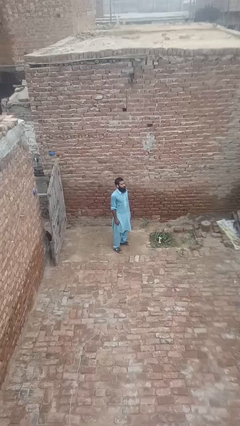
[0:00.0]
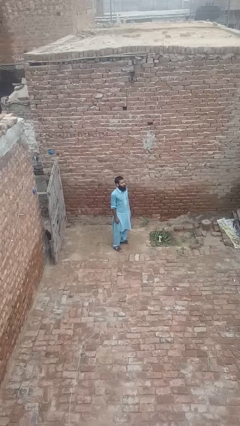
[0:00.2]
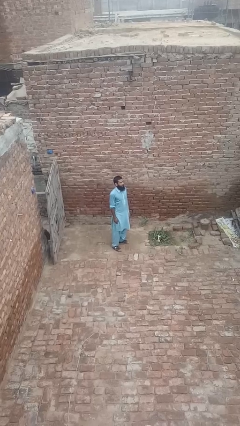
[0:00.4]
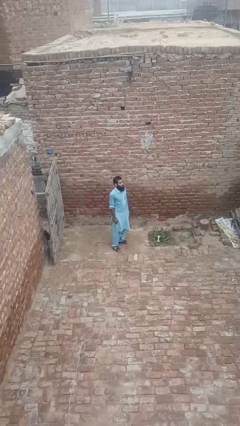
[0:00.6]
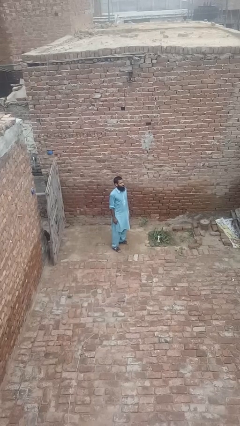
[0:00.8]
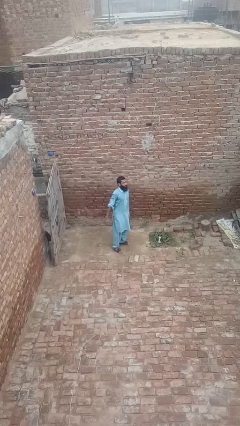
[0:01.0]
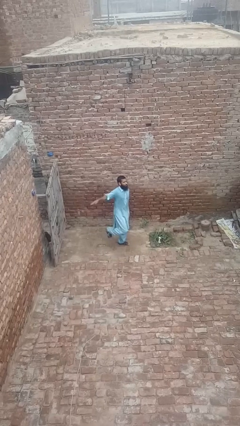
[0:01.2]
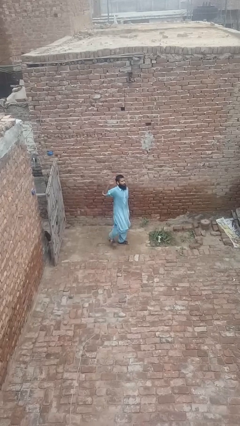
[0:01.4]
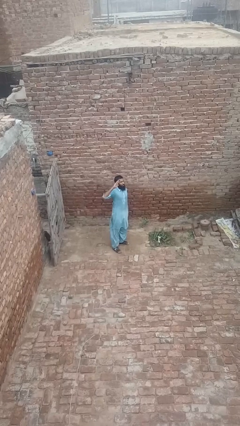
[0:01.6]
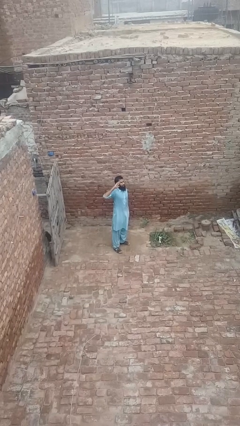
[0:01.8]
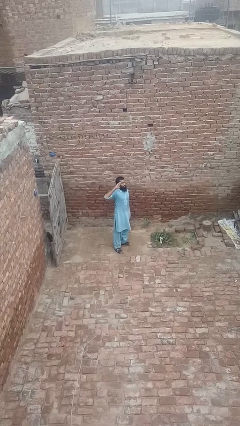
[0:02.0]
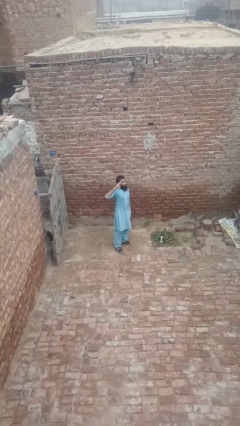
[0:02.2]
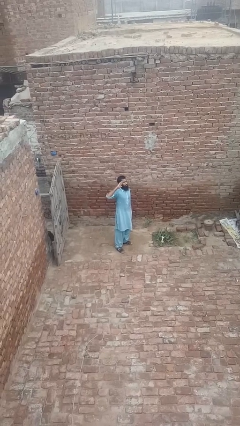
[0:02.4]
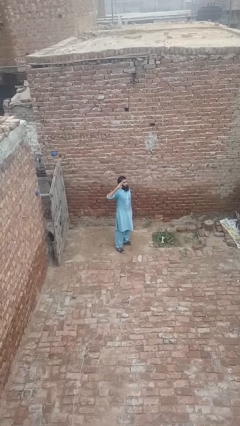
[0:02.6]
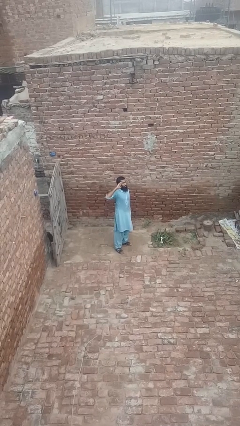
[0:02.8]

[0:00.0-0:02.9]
person salutes

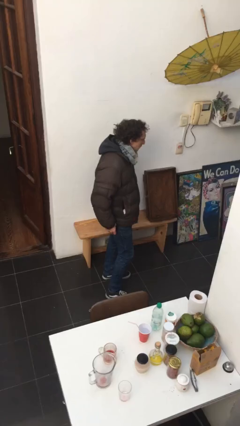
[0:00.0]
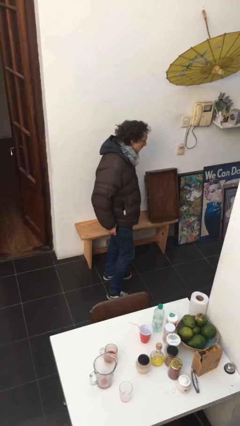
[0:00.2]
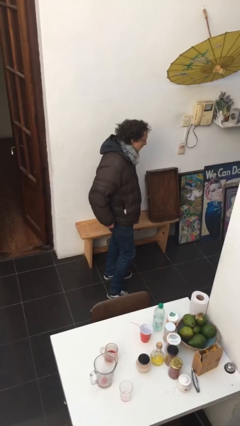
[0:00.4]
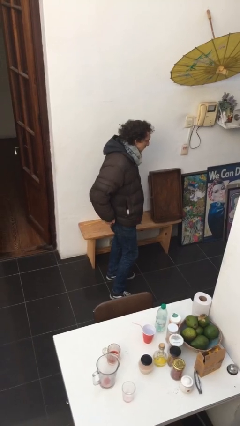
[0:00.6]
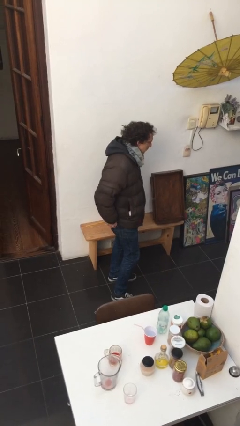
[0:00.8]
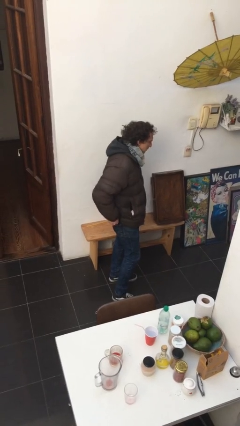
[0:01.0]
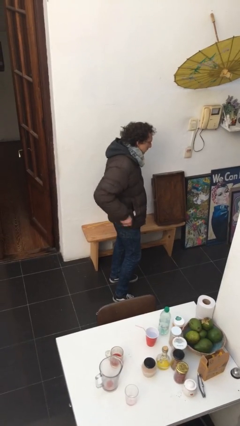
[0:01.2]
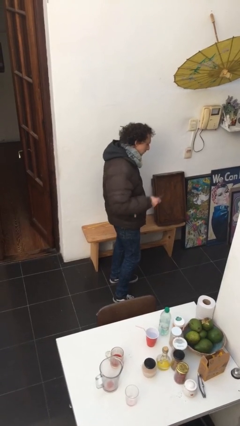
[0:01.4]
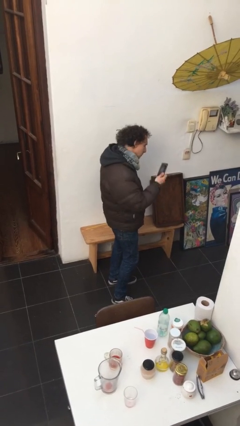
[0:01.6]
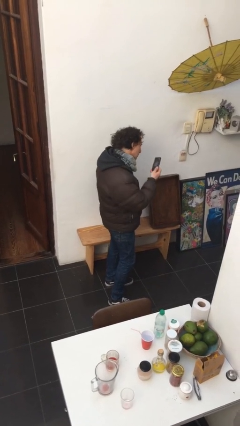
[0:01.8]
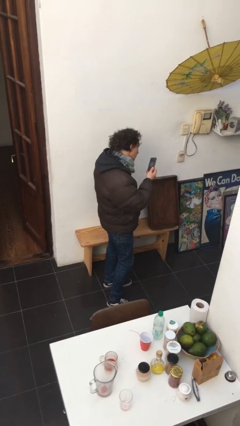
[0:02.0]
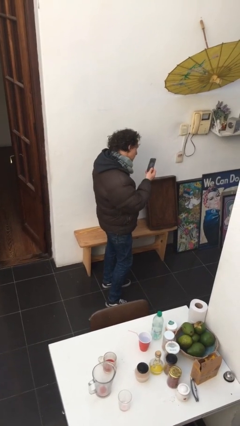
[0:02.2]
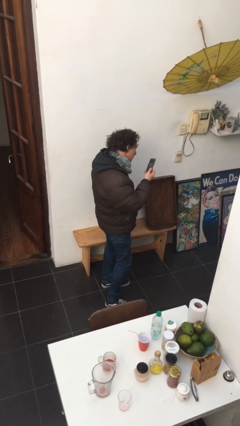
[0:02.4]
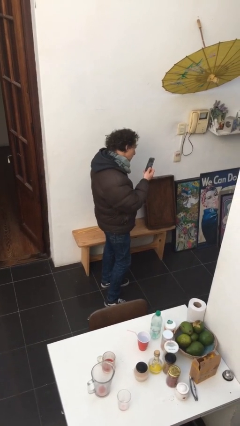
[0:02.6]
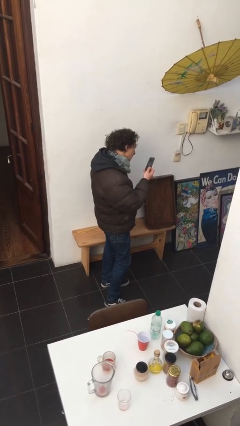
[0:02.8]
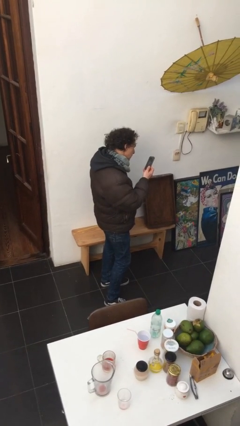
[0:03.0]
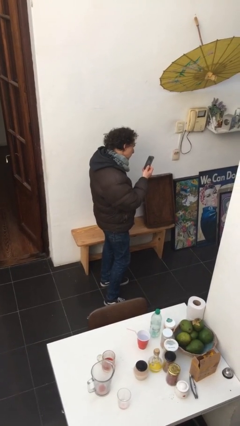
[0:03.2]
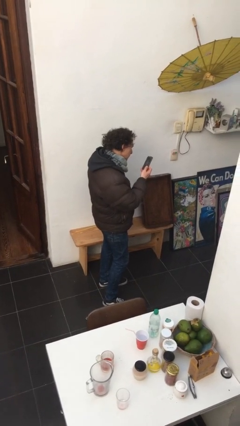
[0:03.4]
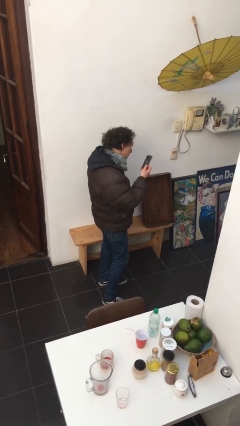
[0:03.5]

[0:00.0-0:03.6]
person takes phone from pocket

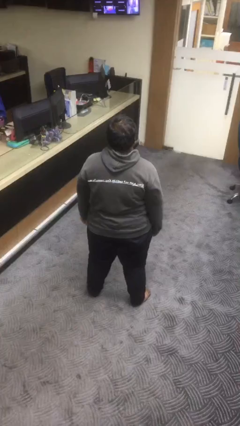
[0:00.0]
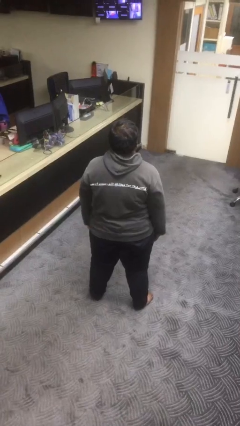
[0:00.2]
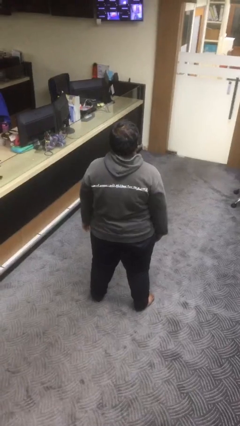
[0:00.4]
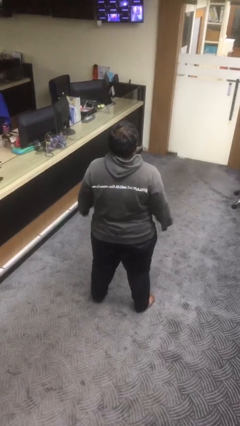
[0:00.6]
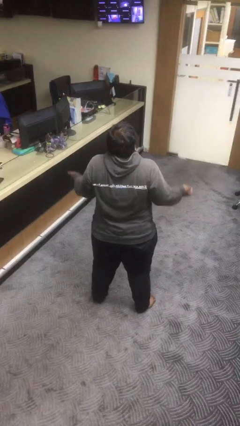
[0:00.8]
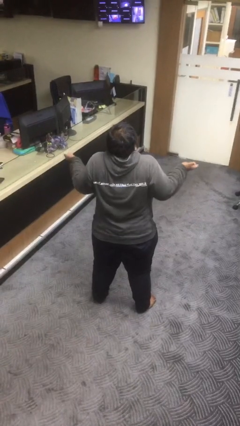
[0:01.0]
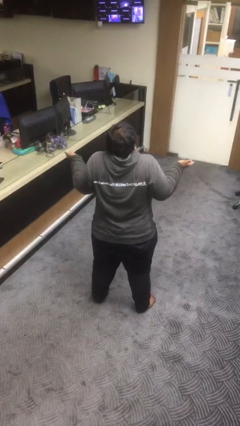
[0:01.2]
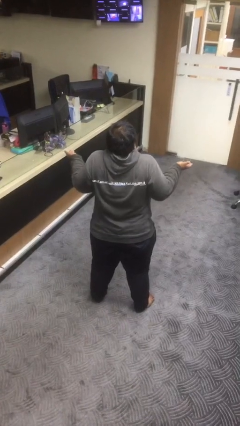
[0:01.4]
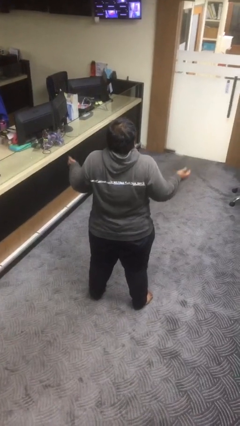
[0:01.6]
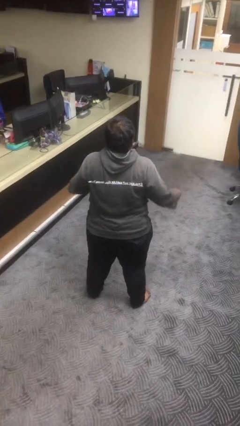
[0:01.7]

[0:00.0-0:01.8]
person shrugs

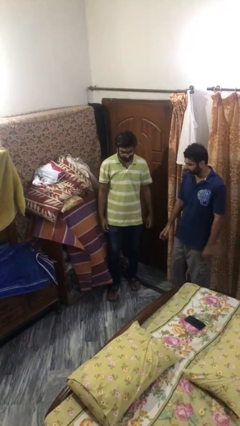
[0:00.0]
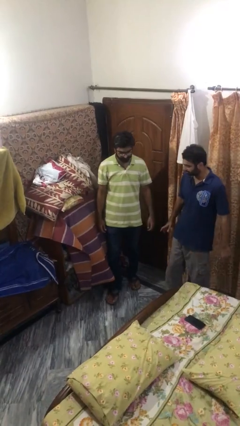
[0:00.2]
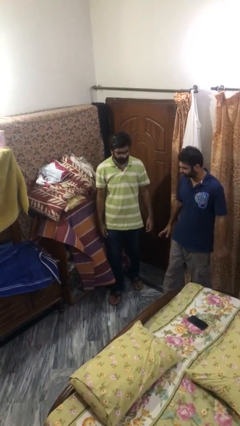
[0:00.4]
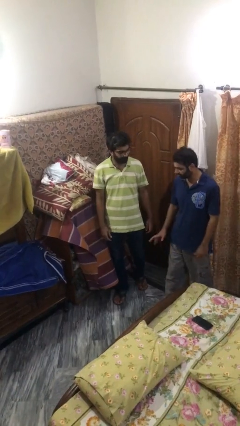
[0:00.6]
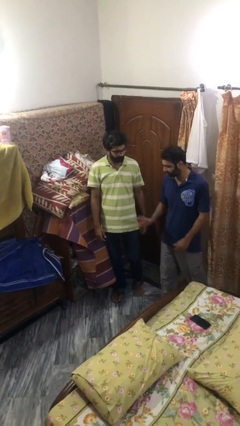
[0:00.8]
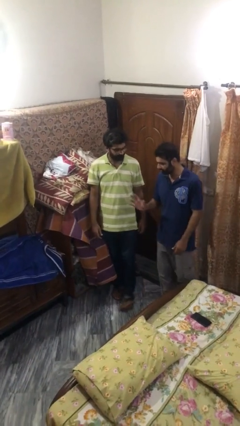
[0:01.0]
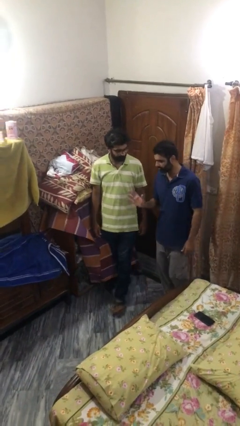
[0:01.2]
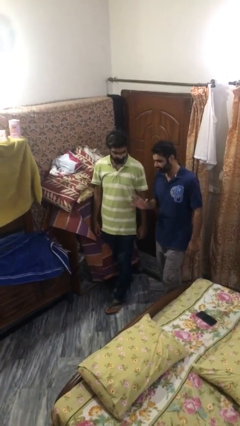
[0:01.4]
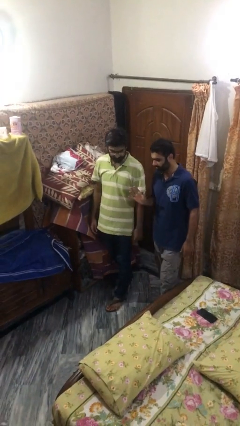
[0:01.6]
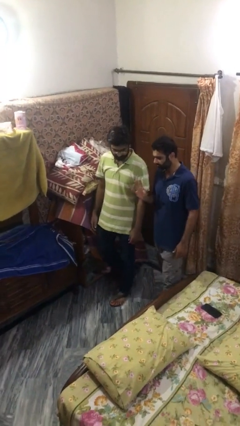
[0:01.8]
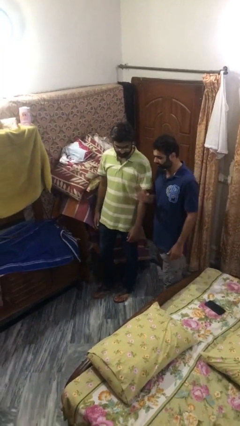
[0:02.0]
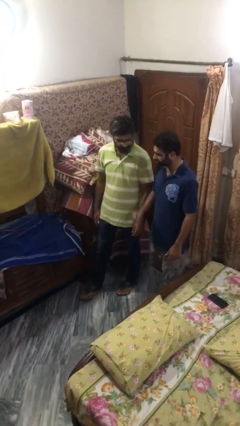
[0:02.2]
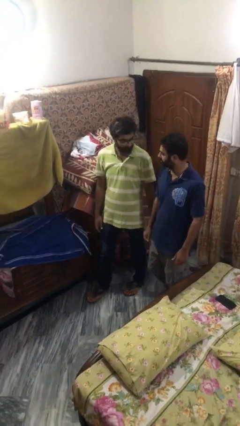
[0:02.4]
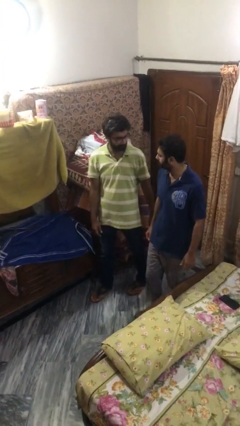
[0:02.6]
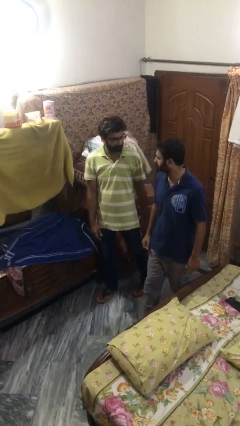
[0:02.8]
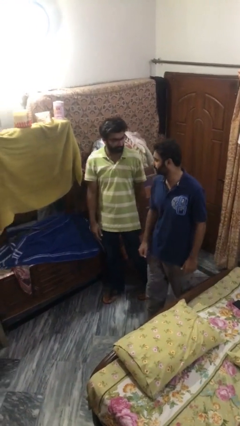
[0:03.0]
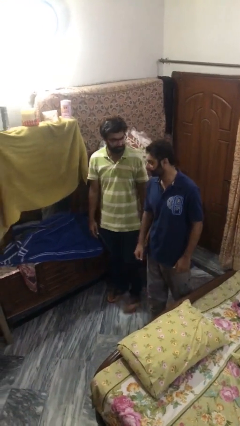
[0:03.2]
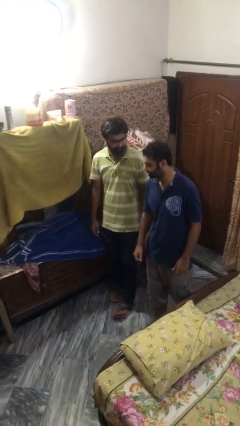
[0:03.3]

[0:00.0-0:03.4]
person talks to person

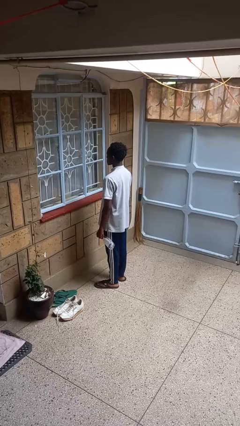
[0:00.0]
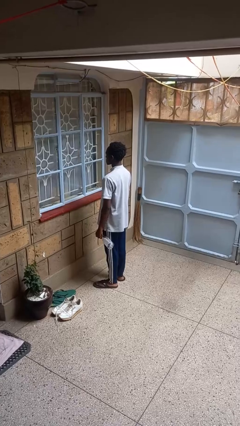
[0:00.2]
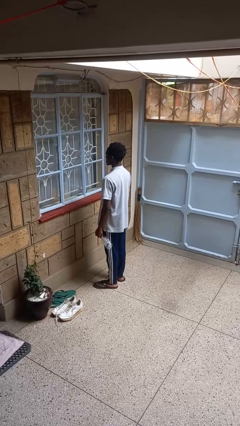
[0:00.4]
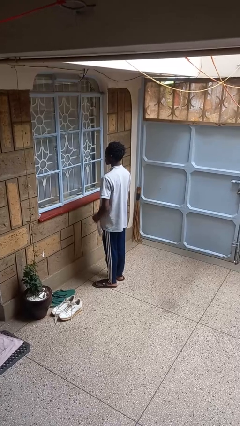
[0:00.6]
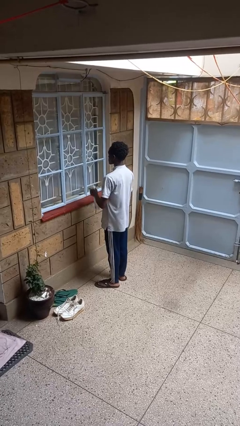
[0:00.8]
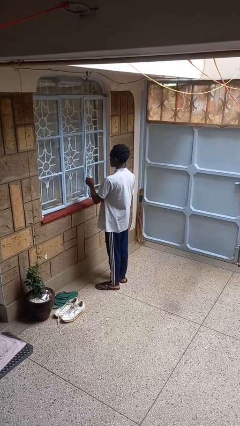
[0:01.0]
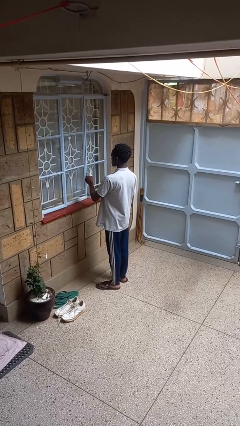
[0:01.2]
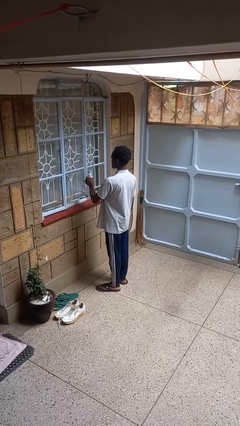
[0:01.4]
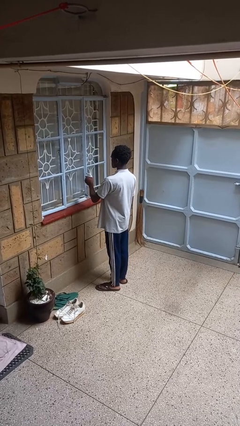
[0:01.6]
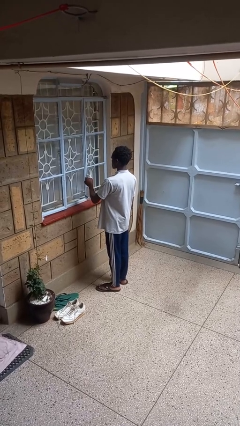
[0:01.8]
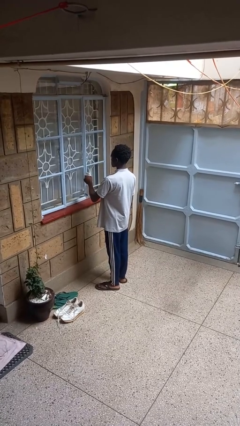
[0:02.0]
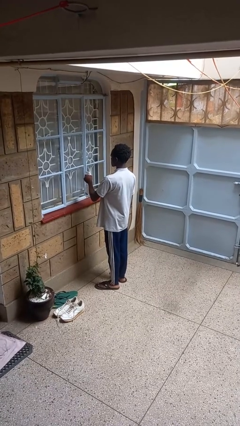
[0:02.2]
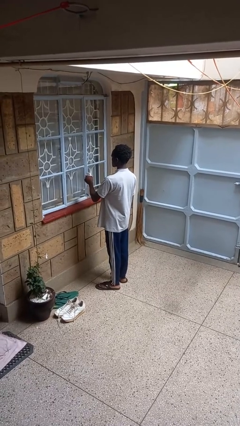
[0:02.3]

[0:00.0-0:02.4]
person sprays from bottle

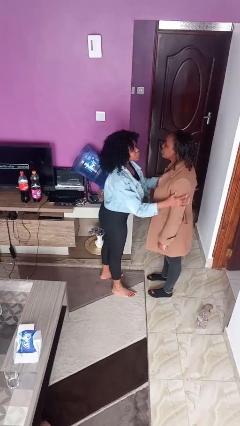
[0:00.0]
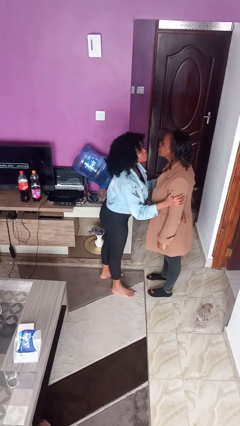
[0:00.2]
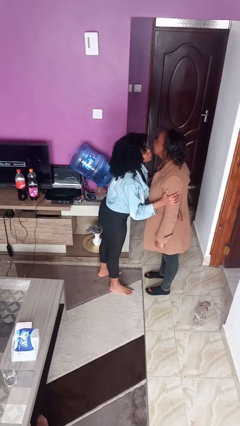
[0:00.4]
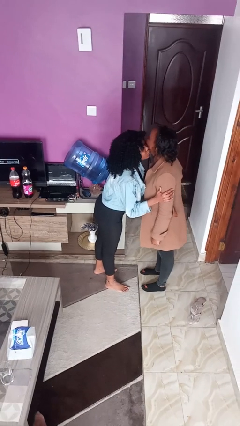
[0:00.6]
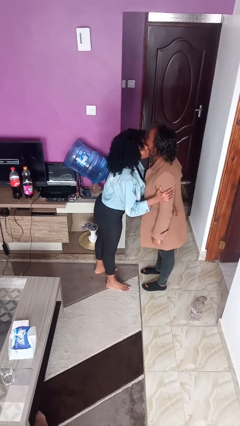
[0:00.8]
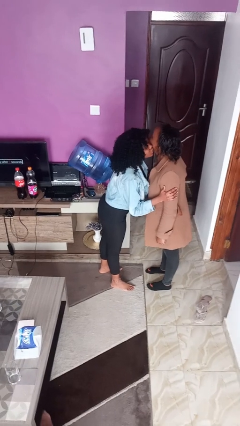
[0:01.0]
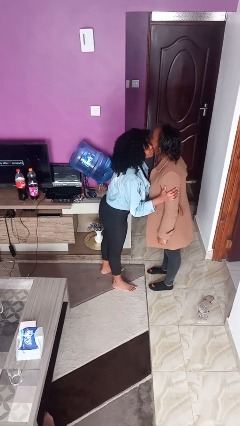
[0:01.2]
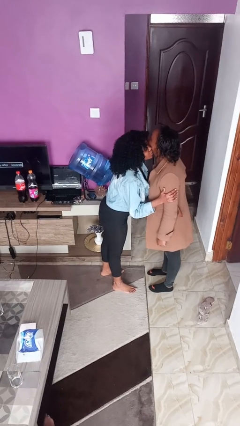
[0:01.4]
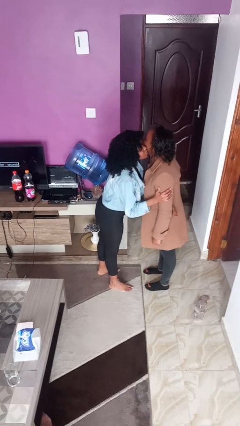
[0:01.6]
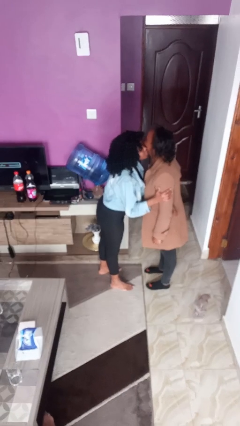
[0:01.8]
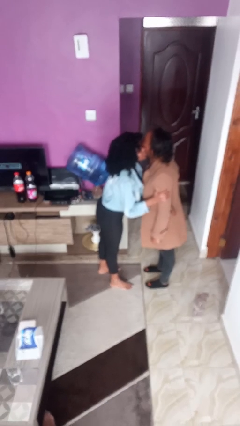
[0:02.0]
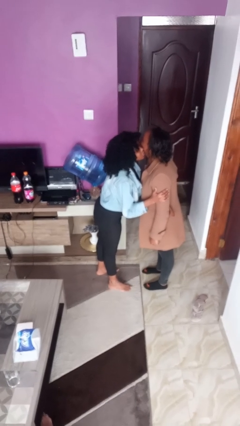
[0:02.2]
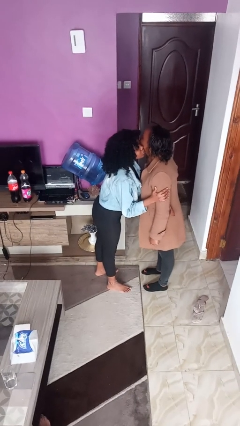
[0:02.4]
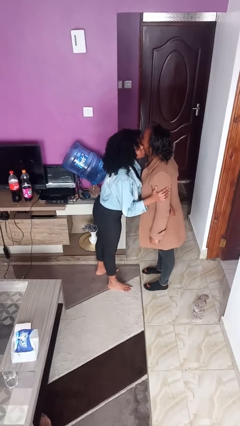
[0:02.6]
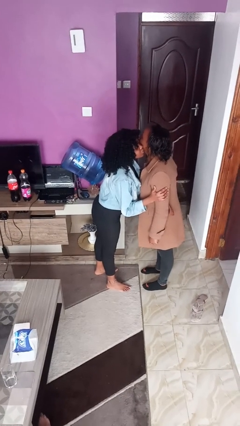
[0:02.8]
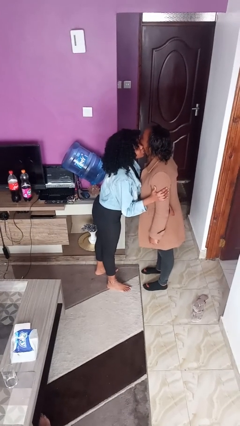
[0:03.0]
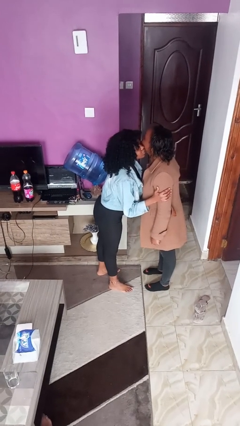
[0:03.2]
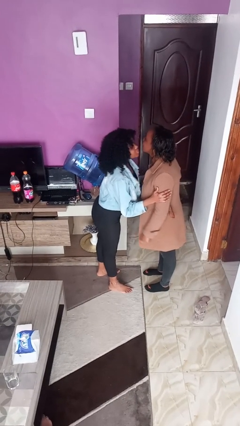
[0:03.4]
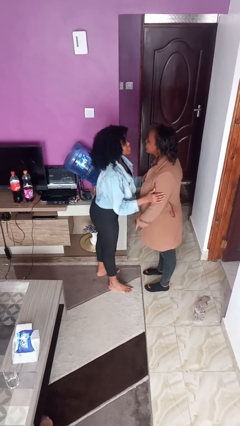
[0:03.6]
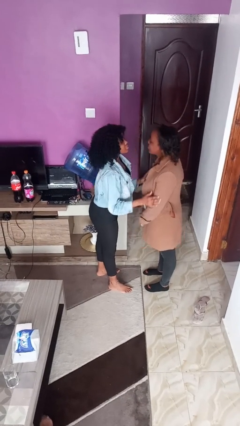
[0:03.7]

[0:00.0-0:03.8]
person kisses cheek of person
